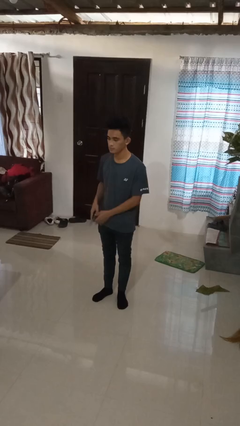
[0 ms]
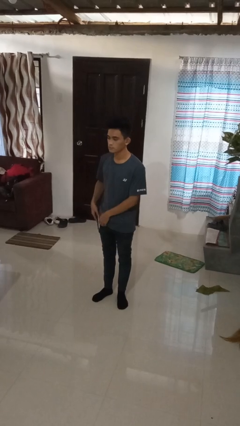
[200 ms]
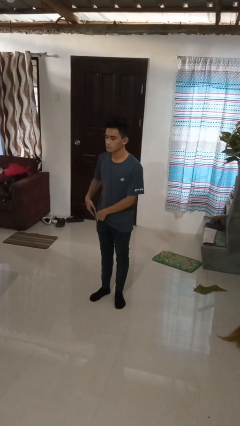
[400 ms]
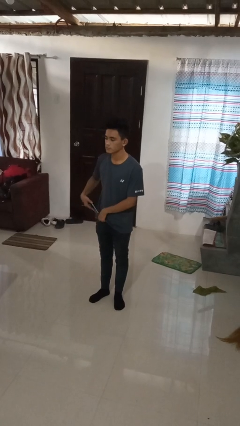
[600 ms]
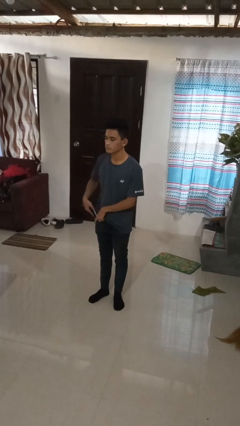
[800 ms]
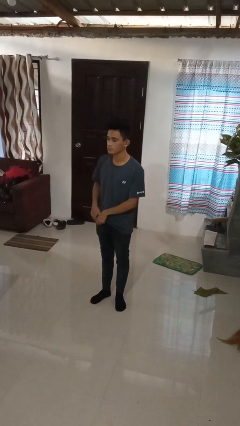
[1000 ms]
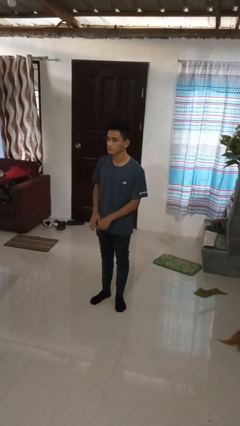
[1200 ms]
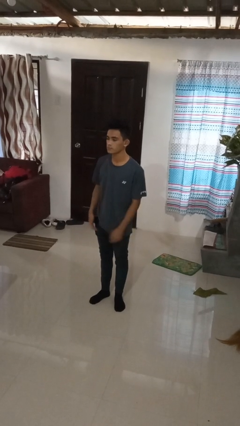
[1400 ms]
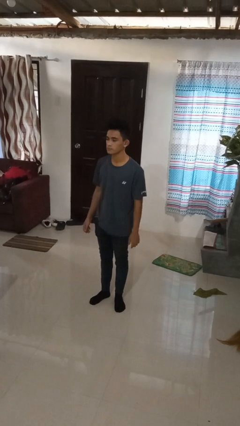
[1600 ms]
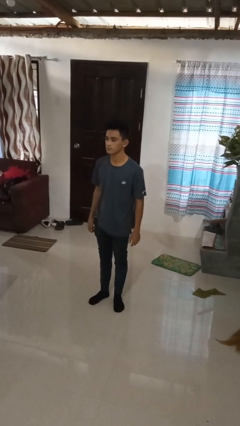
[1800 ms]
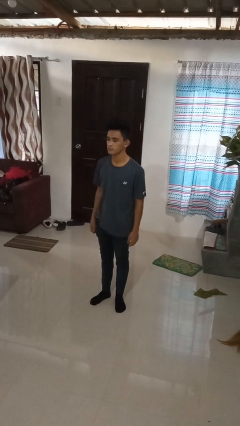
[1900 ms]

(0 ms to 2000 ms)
person puts phone into pocket

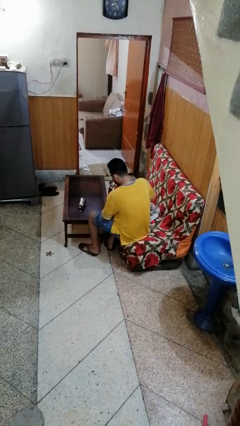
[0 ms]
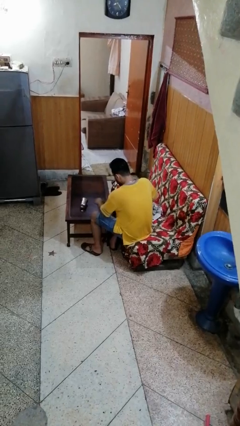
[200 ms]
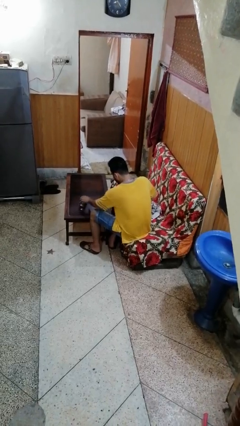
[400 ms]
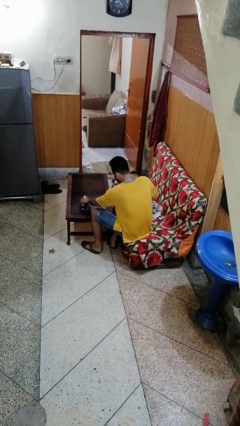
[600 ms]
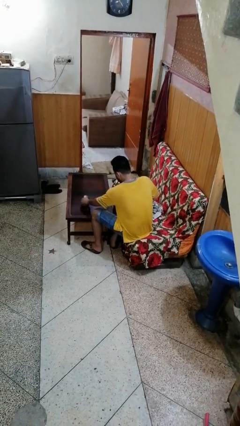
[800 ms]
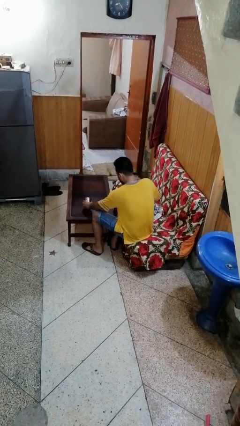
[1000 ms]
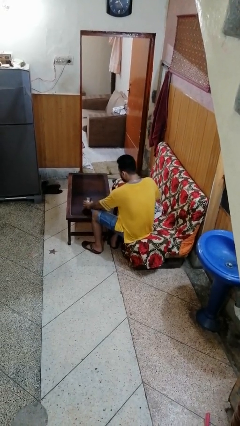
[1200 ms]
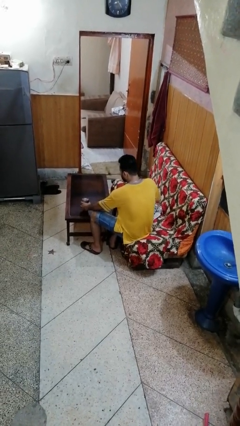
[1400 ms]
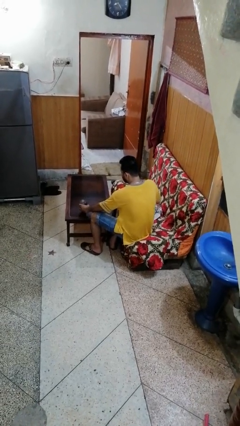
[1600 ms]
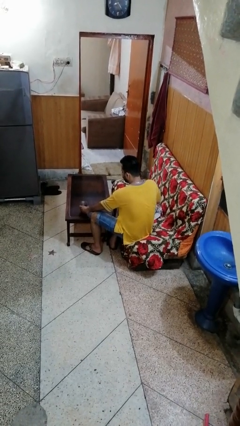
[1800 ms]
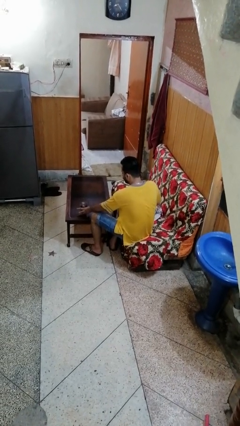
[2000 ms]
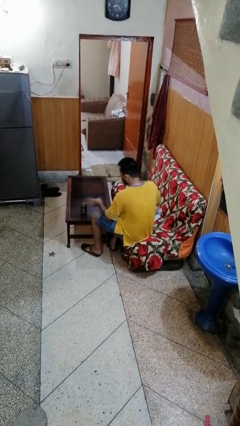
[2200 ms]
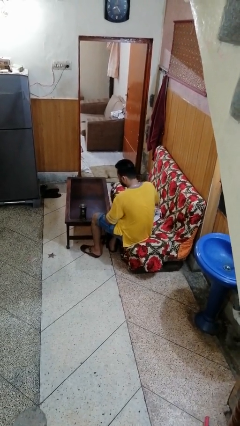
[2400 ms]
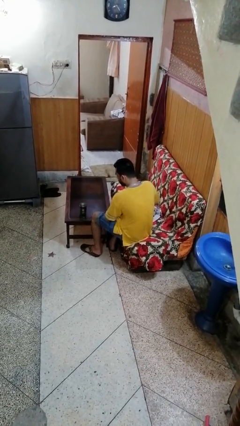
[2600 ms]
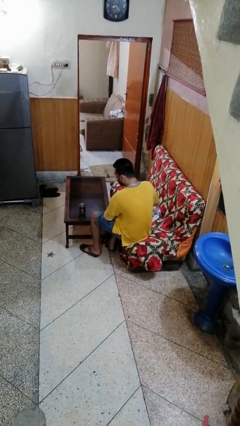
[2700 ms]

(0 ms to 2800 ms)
person sets upright glass

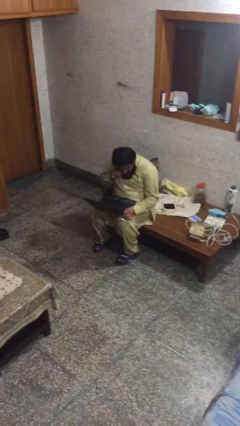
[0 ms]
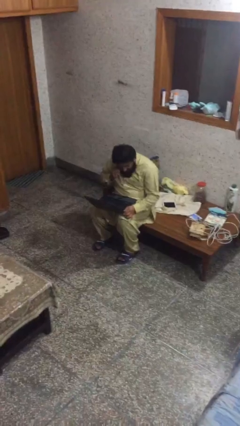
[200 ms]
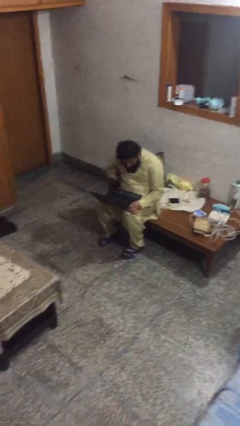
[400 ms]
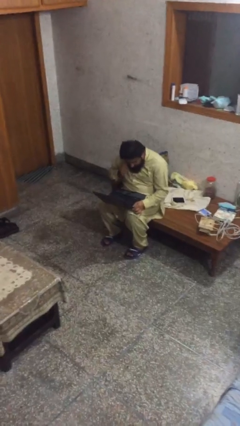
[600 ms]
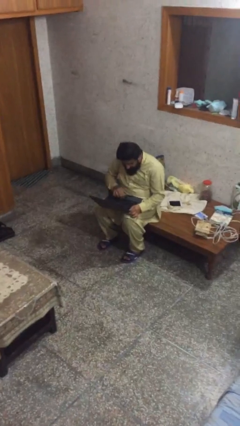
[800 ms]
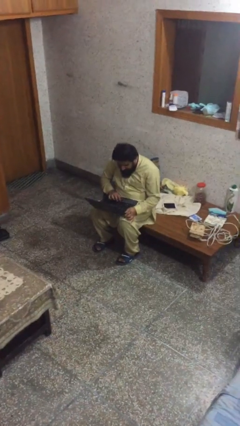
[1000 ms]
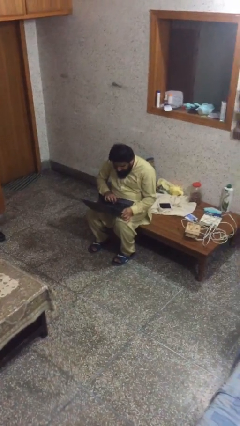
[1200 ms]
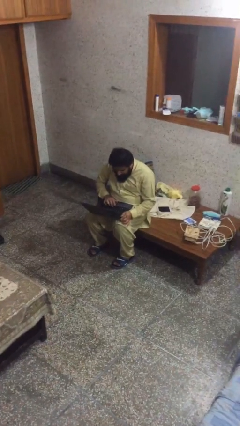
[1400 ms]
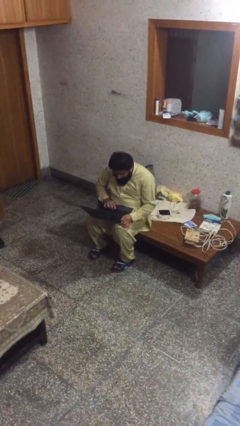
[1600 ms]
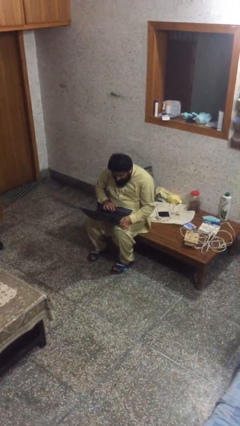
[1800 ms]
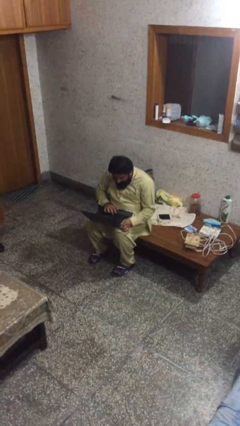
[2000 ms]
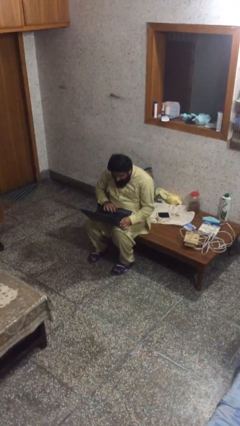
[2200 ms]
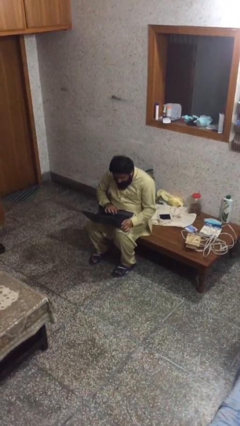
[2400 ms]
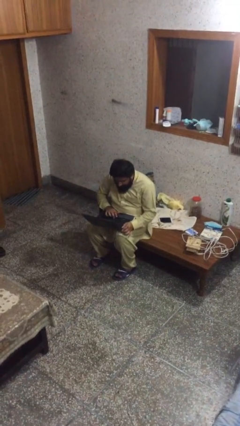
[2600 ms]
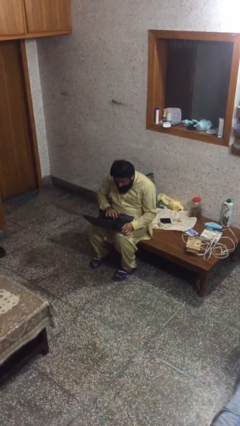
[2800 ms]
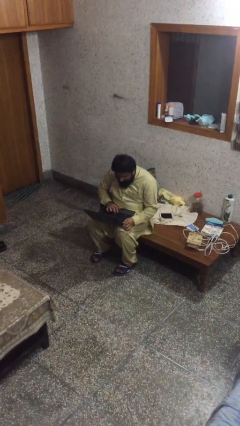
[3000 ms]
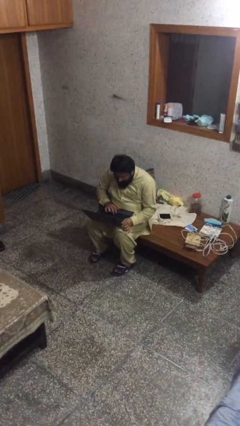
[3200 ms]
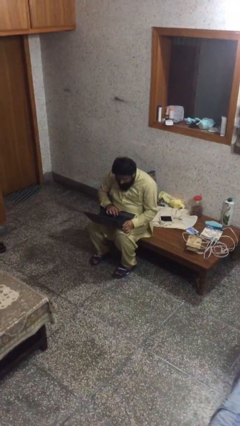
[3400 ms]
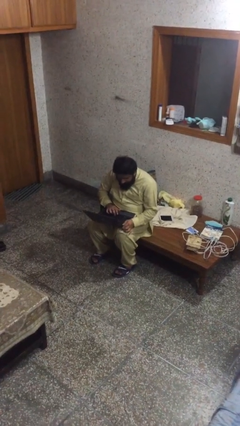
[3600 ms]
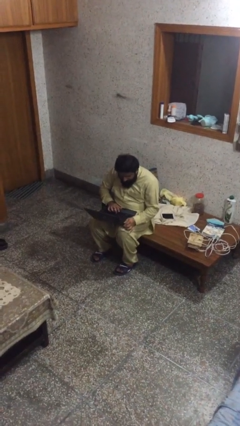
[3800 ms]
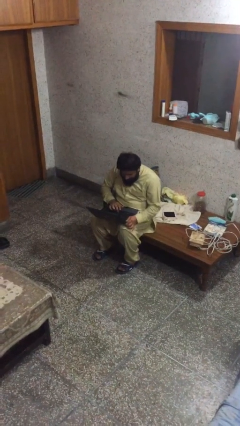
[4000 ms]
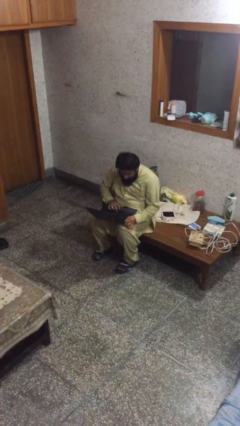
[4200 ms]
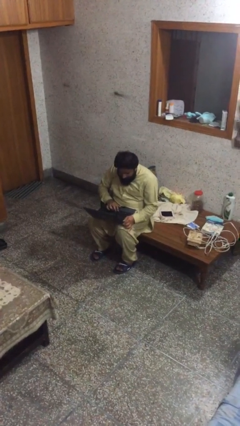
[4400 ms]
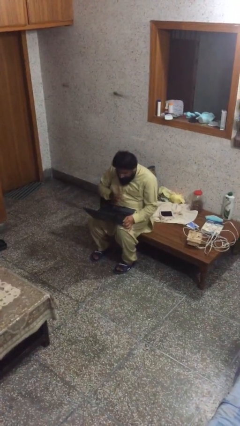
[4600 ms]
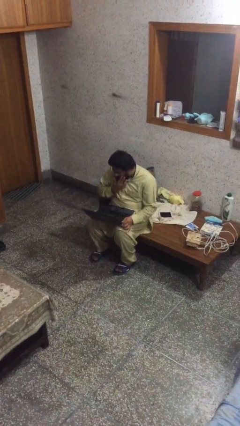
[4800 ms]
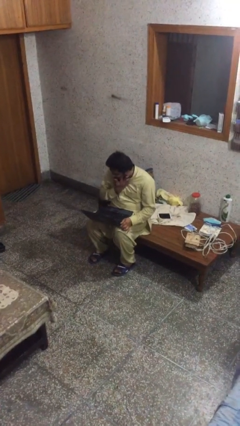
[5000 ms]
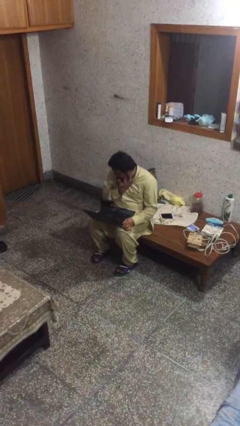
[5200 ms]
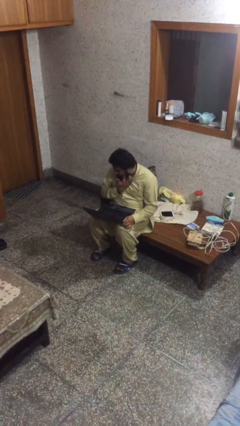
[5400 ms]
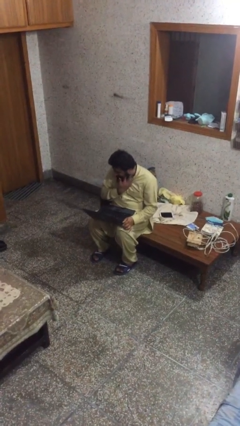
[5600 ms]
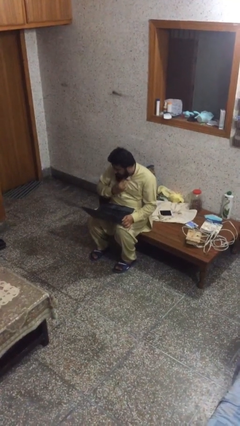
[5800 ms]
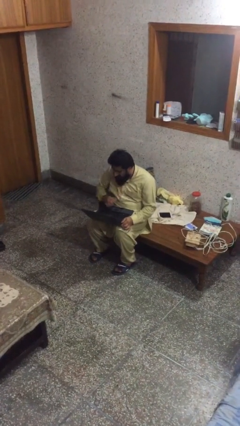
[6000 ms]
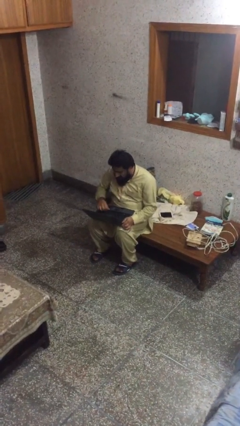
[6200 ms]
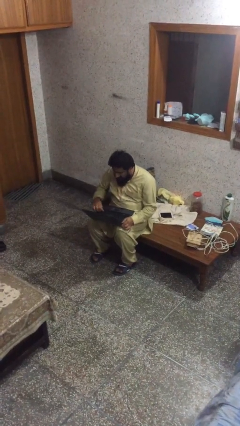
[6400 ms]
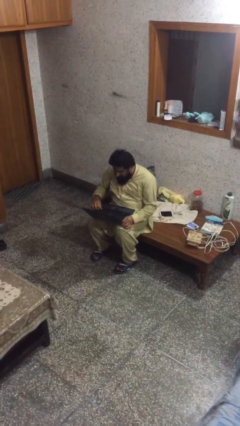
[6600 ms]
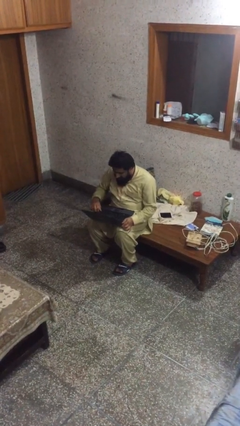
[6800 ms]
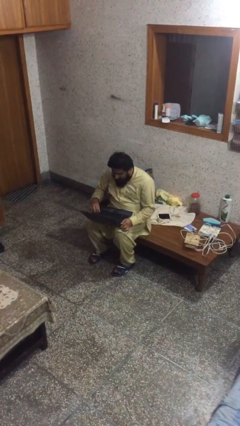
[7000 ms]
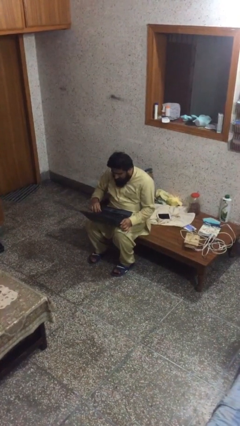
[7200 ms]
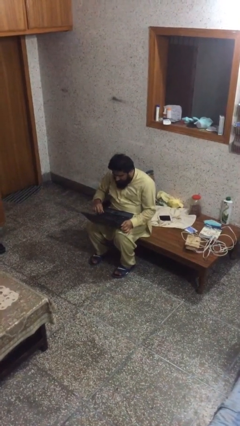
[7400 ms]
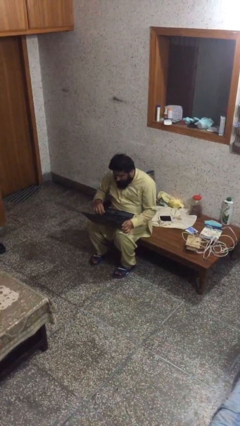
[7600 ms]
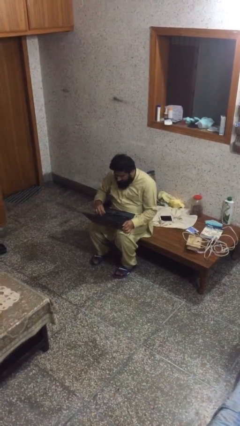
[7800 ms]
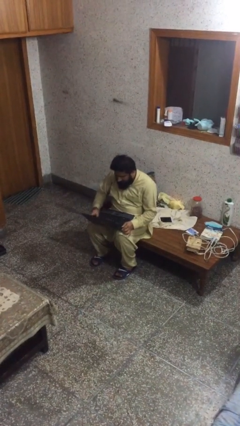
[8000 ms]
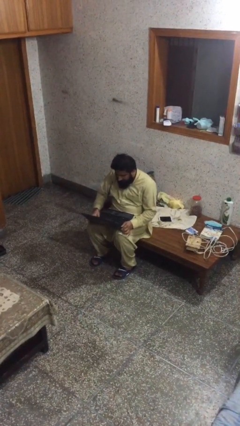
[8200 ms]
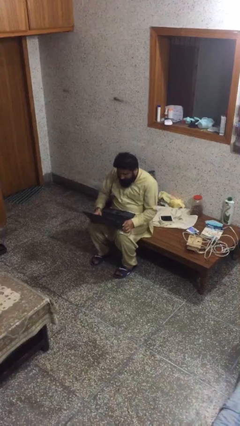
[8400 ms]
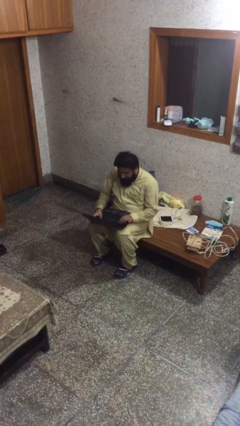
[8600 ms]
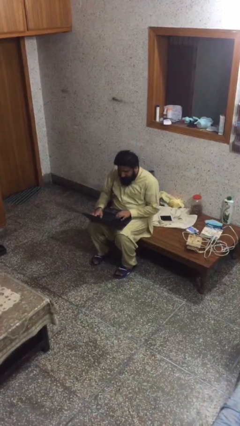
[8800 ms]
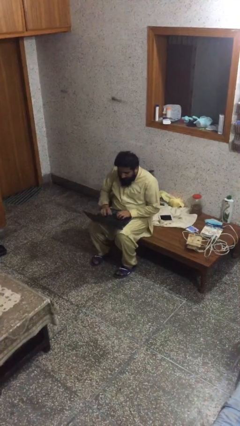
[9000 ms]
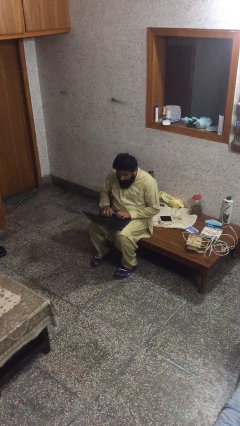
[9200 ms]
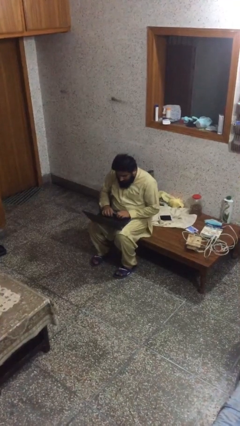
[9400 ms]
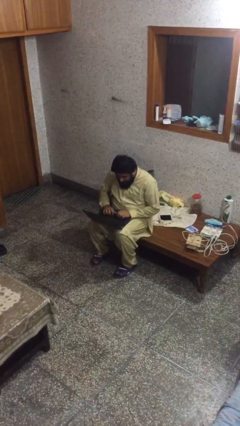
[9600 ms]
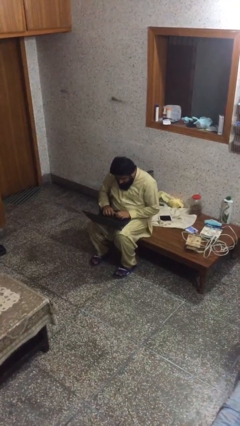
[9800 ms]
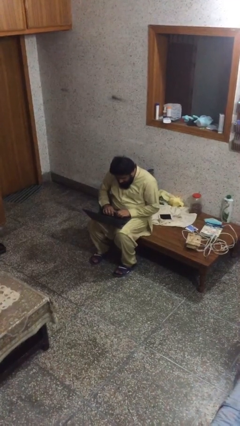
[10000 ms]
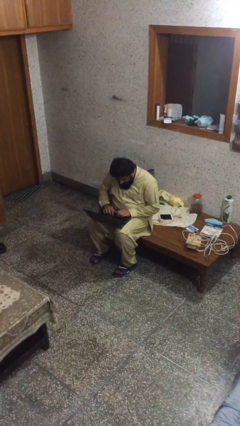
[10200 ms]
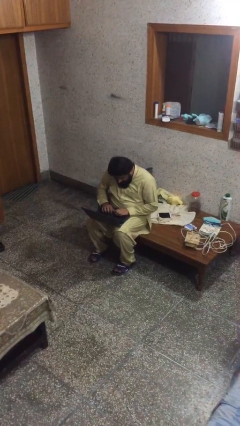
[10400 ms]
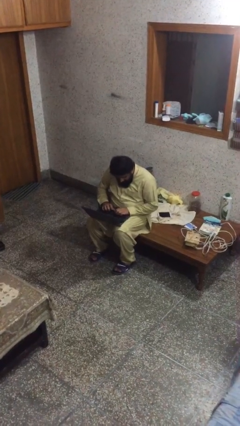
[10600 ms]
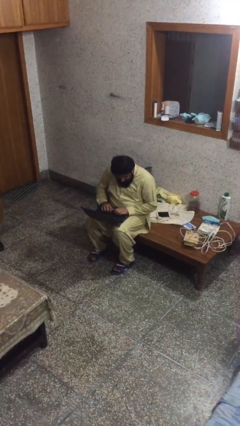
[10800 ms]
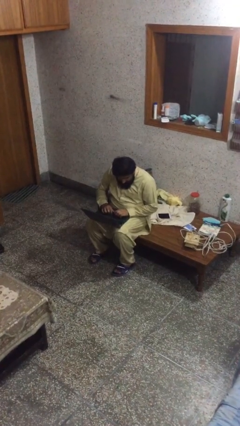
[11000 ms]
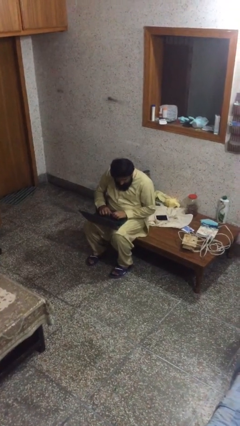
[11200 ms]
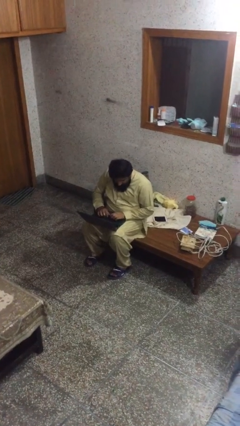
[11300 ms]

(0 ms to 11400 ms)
person interacts with laptop

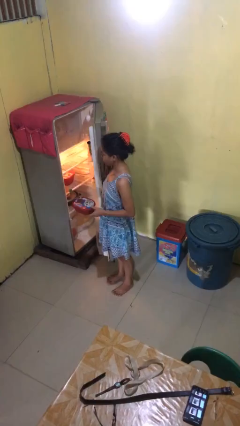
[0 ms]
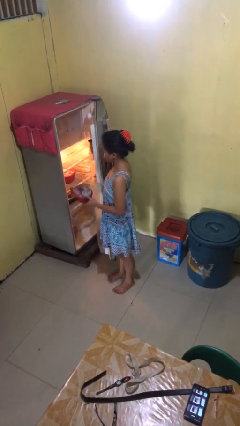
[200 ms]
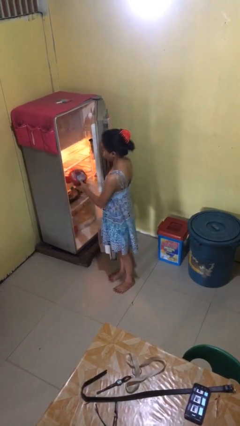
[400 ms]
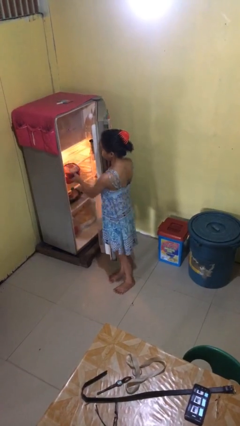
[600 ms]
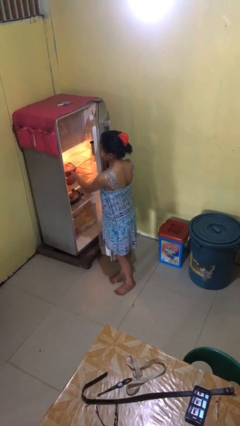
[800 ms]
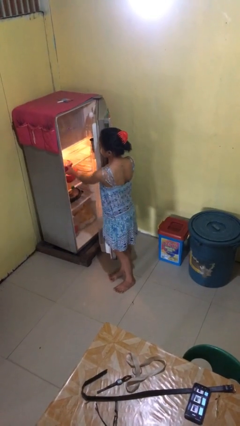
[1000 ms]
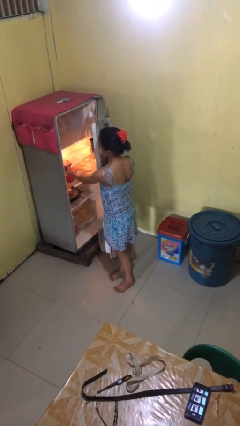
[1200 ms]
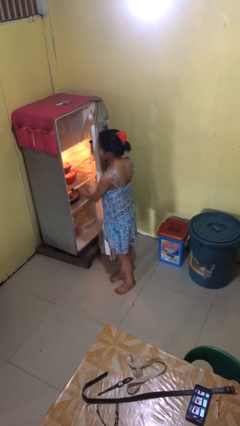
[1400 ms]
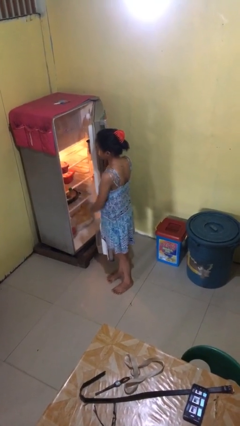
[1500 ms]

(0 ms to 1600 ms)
person puts object into refrigerator

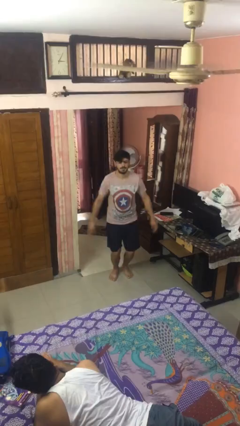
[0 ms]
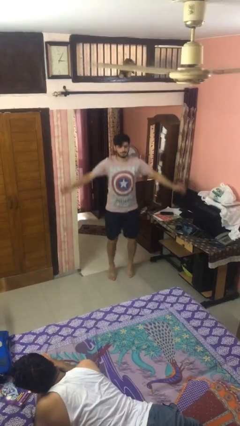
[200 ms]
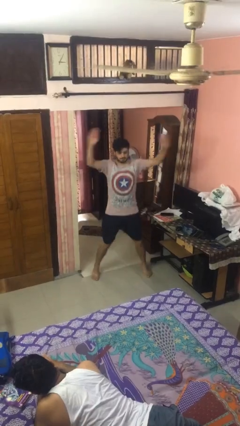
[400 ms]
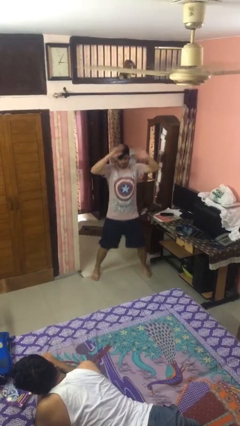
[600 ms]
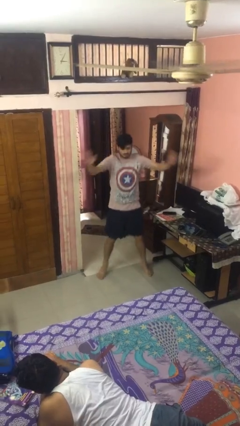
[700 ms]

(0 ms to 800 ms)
person exercises with jumping jacks
